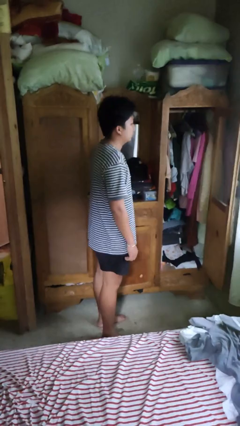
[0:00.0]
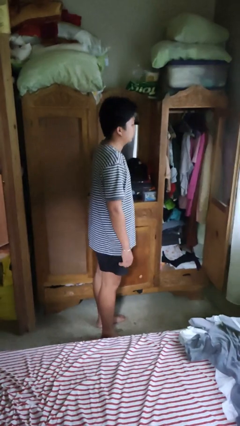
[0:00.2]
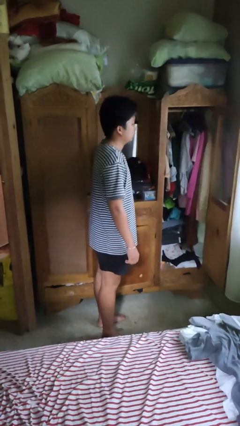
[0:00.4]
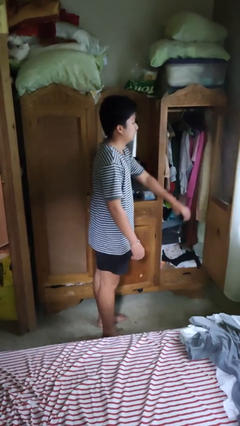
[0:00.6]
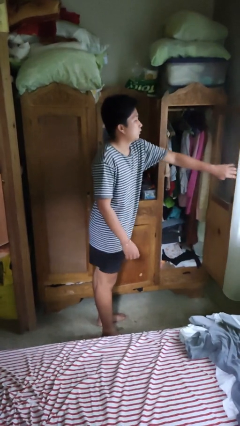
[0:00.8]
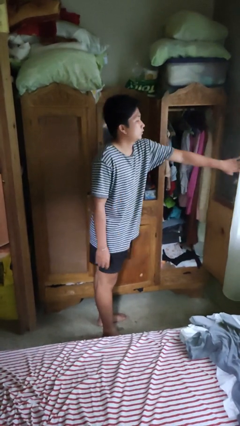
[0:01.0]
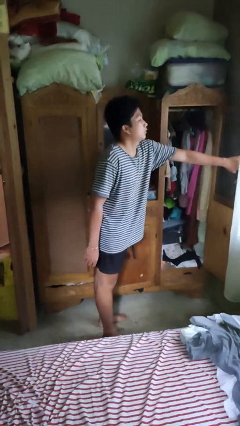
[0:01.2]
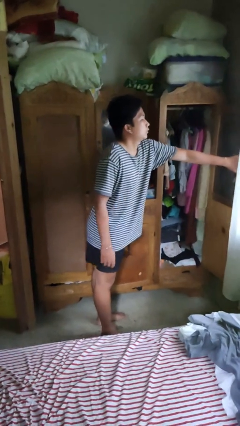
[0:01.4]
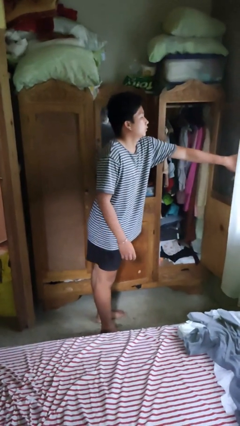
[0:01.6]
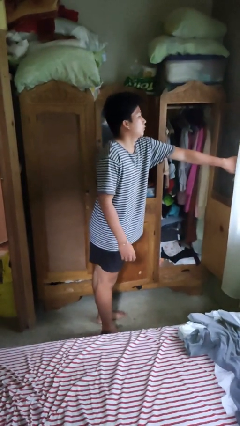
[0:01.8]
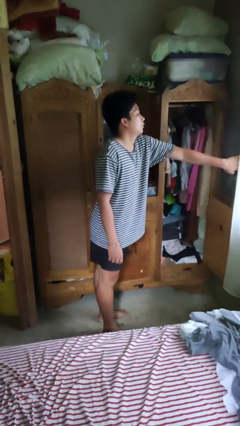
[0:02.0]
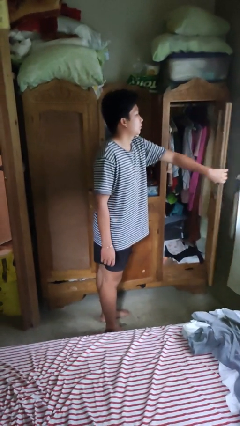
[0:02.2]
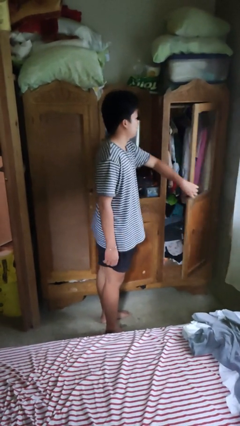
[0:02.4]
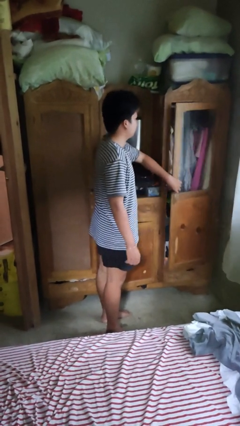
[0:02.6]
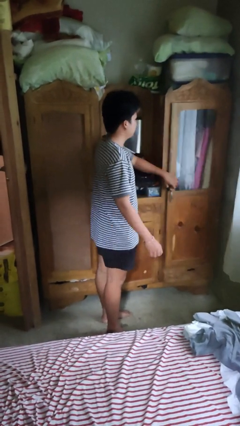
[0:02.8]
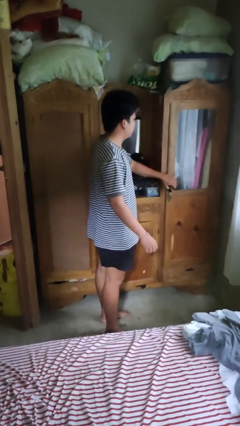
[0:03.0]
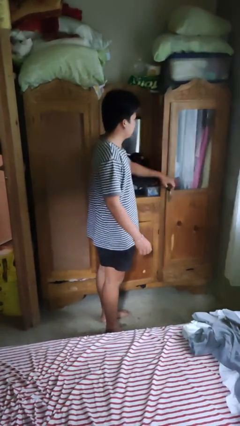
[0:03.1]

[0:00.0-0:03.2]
person closes closet door

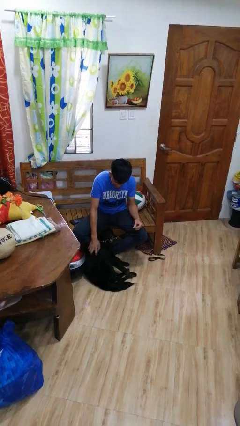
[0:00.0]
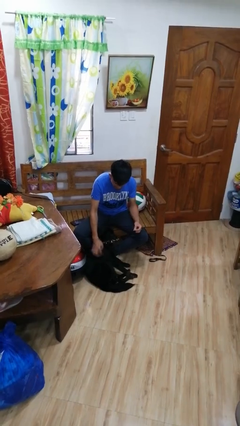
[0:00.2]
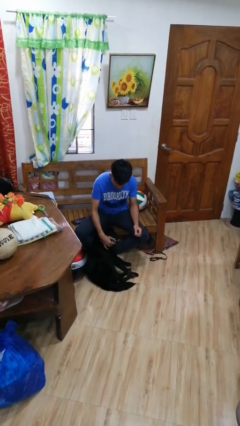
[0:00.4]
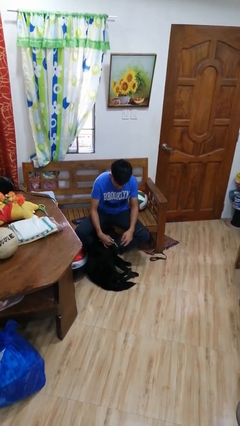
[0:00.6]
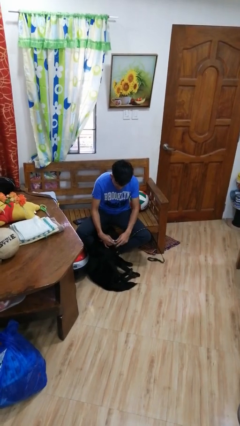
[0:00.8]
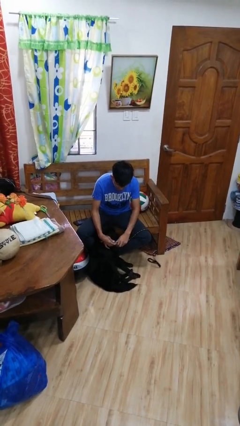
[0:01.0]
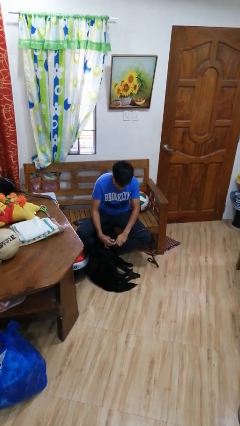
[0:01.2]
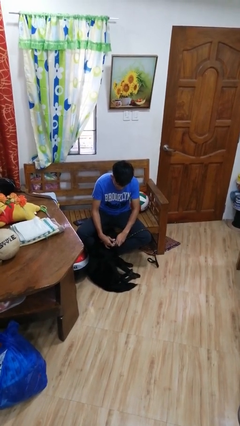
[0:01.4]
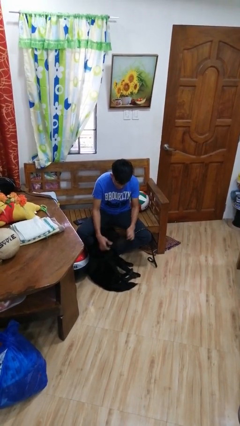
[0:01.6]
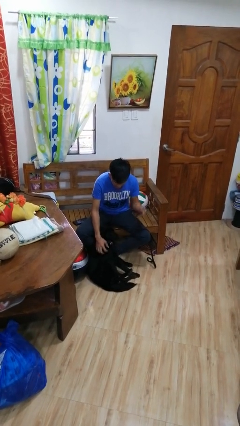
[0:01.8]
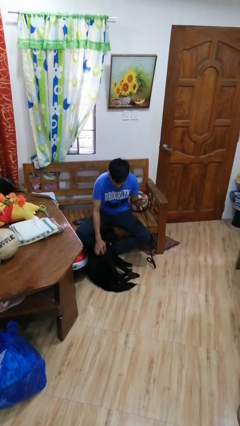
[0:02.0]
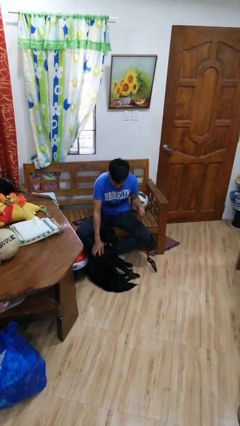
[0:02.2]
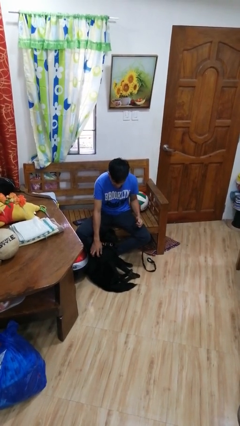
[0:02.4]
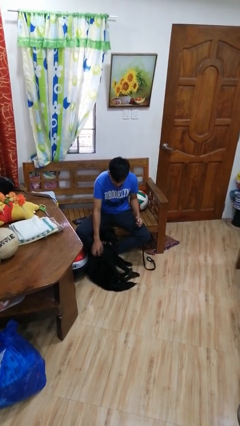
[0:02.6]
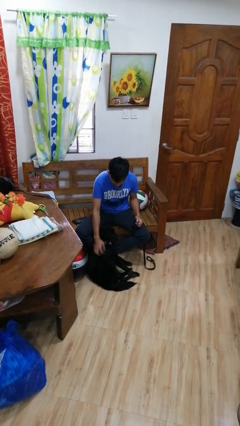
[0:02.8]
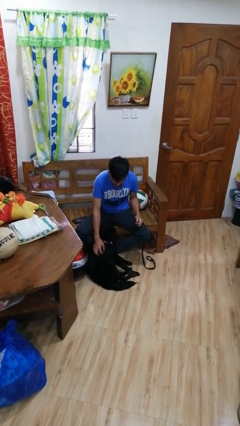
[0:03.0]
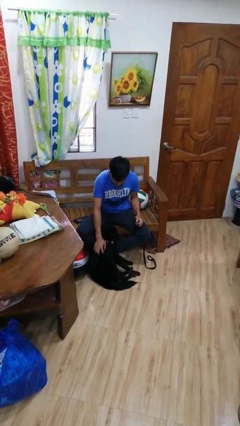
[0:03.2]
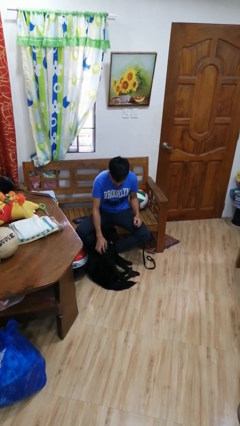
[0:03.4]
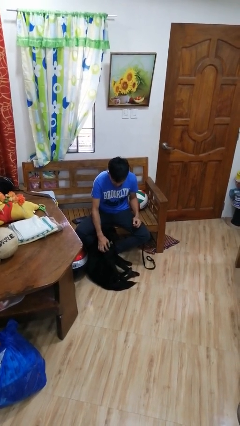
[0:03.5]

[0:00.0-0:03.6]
person unattaches leash from dog

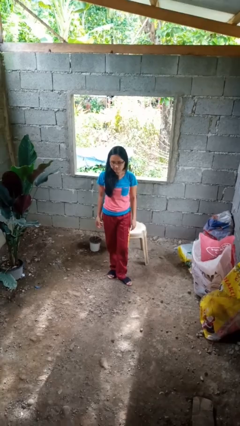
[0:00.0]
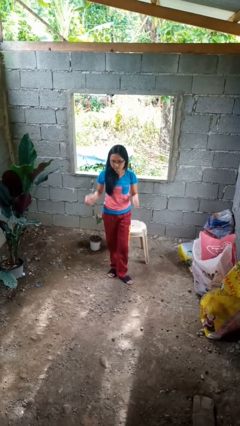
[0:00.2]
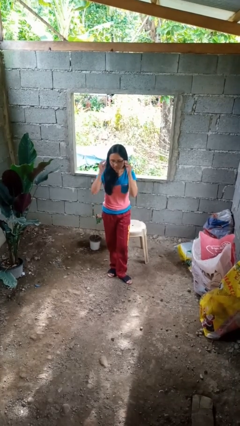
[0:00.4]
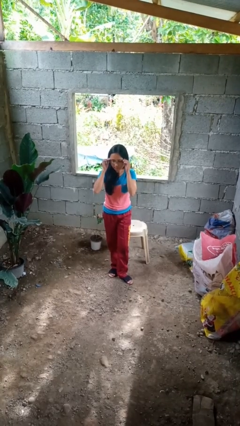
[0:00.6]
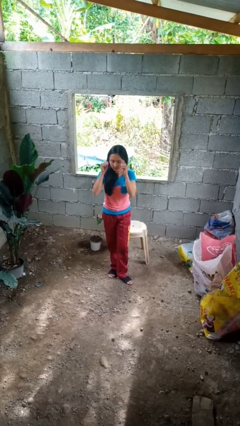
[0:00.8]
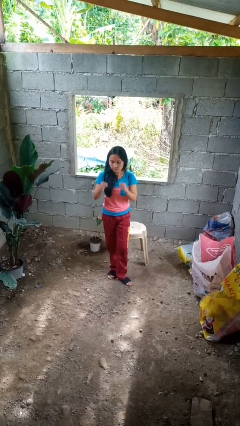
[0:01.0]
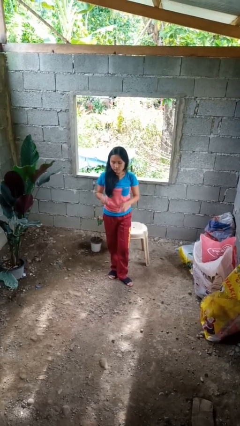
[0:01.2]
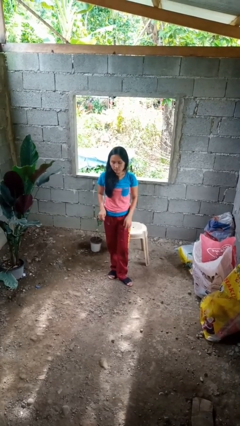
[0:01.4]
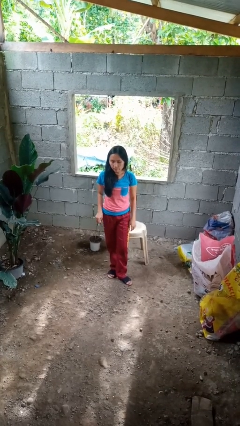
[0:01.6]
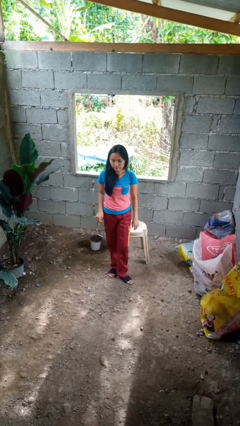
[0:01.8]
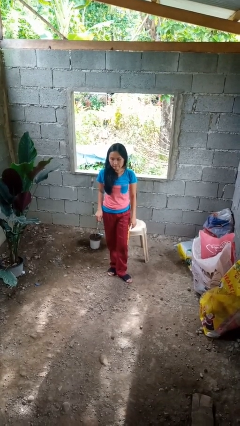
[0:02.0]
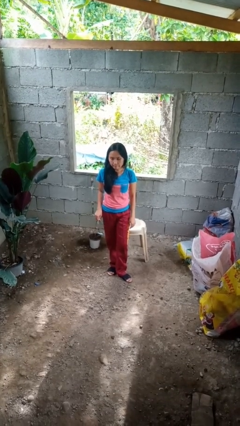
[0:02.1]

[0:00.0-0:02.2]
person takes off glasses

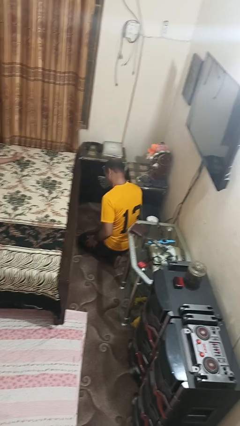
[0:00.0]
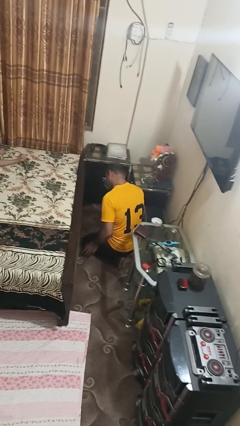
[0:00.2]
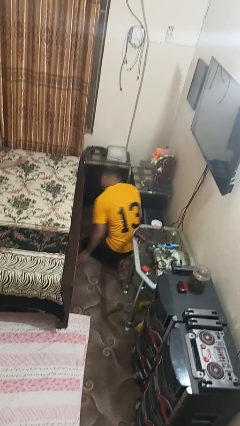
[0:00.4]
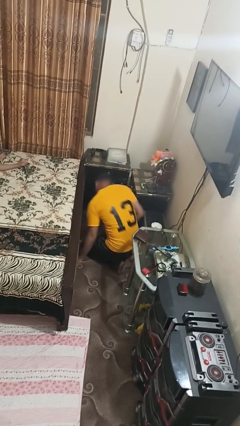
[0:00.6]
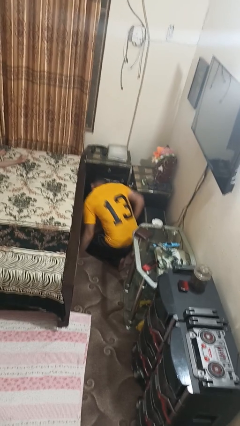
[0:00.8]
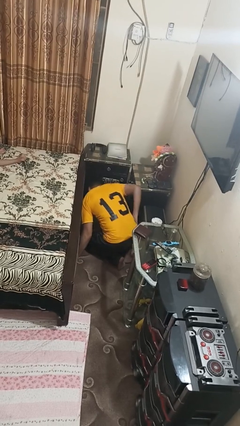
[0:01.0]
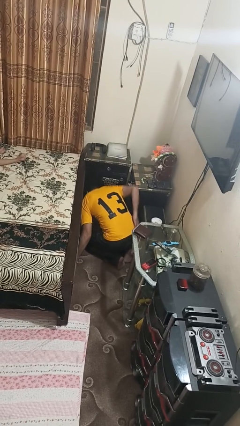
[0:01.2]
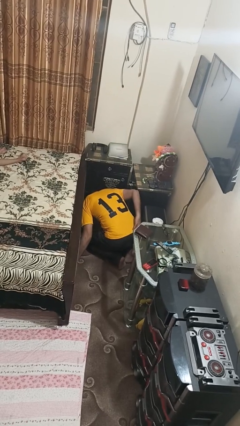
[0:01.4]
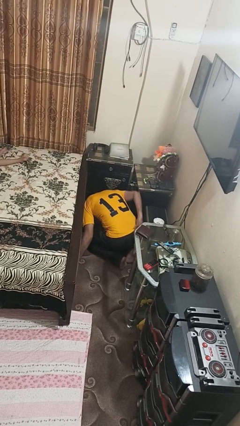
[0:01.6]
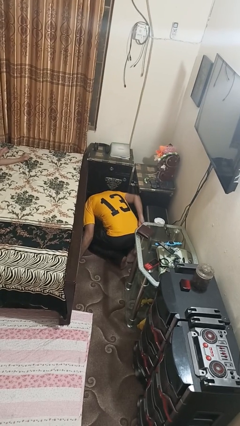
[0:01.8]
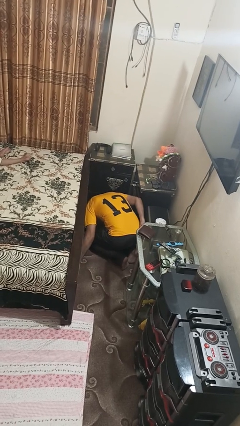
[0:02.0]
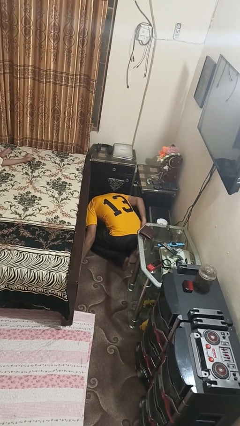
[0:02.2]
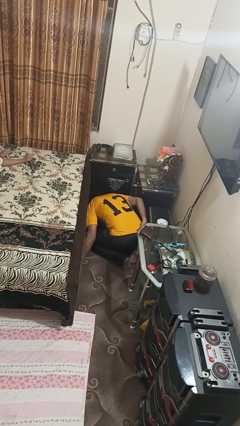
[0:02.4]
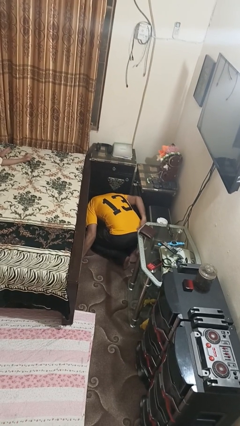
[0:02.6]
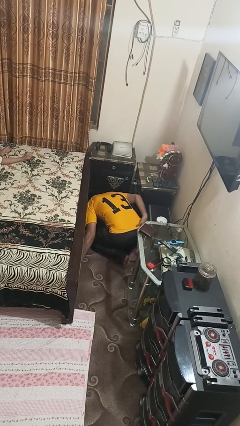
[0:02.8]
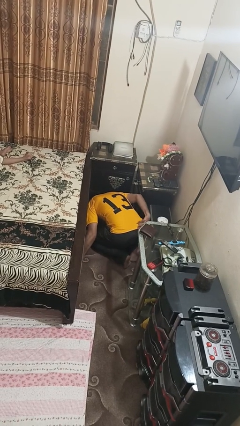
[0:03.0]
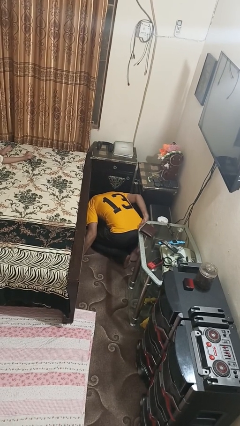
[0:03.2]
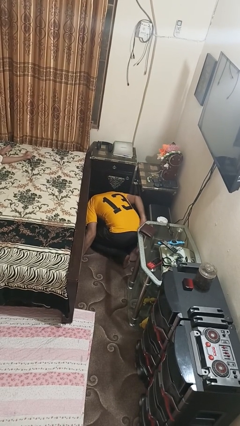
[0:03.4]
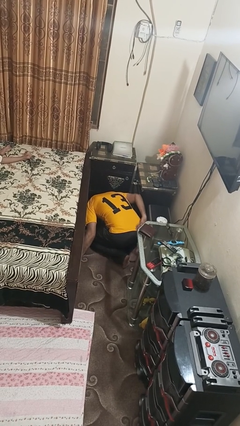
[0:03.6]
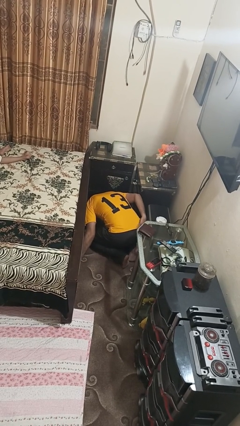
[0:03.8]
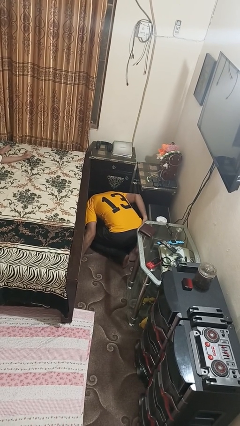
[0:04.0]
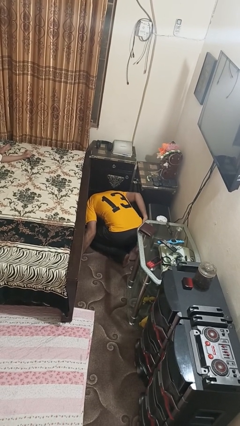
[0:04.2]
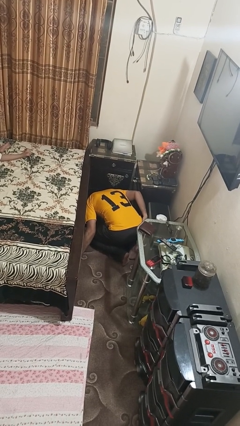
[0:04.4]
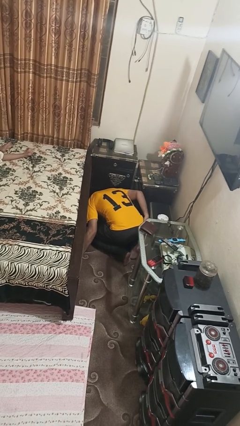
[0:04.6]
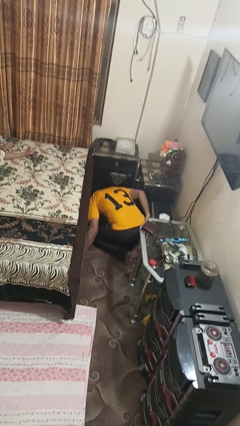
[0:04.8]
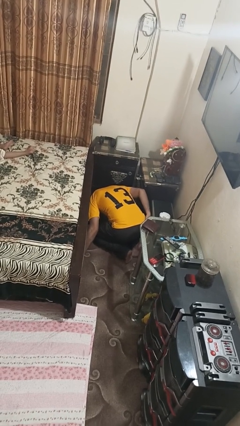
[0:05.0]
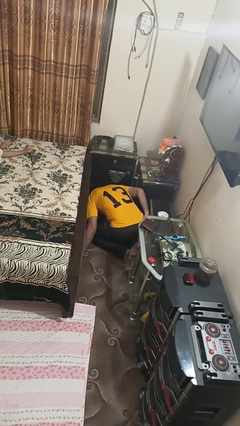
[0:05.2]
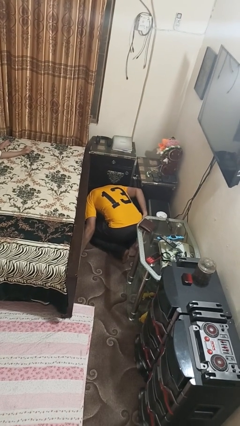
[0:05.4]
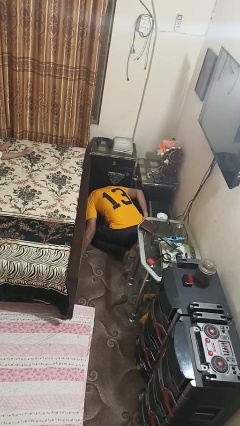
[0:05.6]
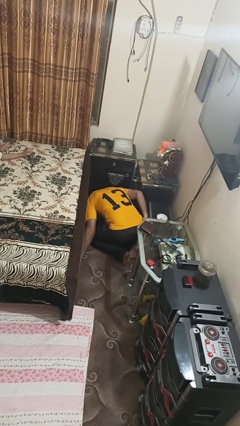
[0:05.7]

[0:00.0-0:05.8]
person searches under bed

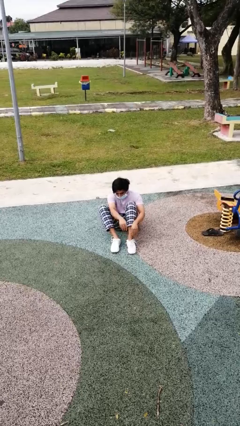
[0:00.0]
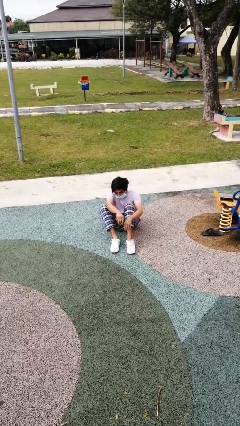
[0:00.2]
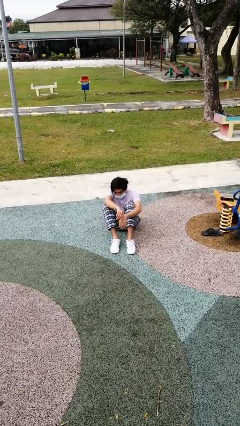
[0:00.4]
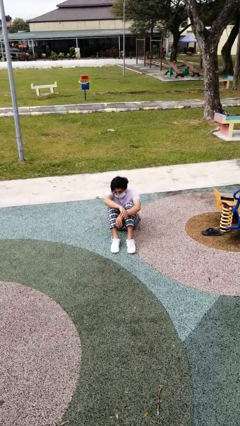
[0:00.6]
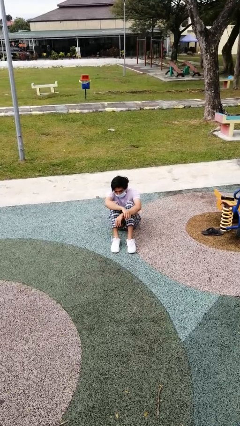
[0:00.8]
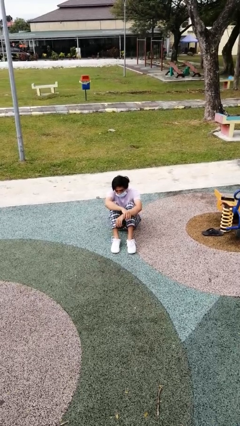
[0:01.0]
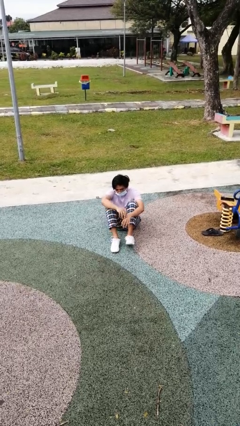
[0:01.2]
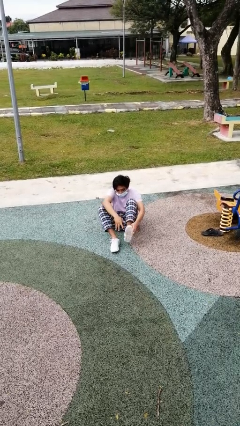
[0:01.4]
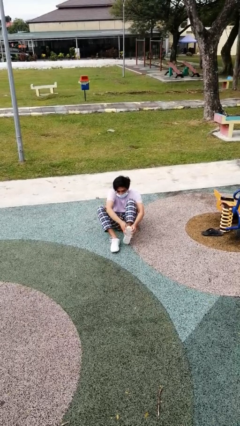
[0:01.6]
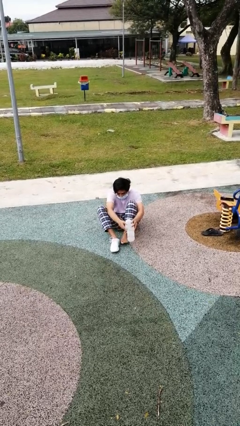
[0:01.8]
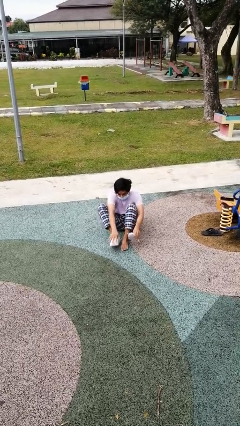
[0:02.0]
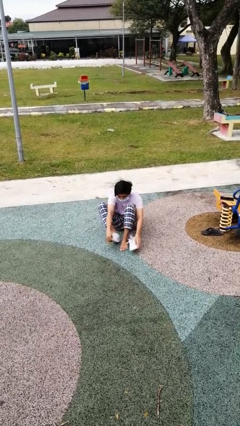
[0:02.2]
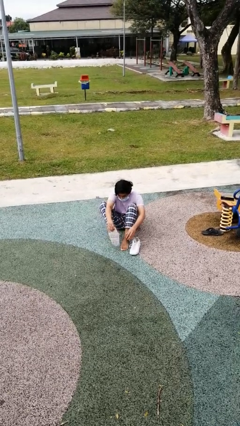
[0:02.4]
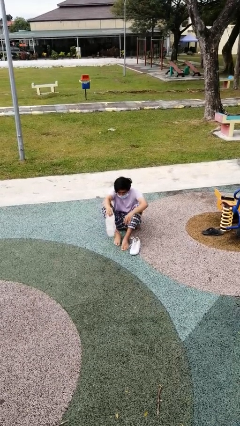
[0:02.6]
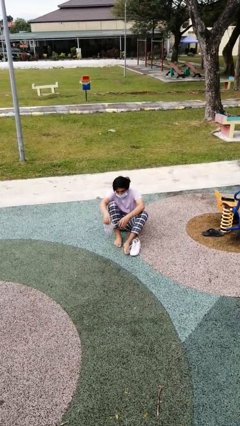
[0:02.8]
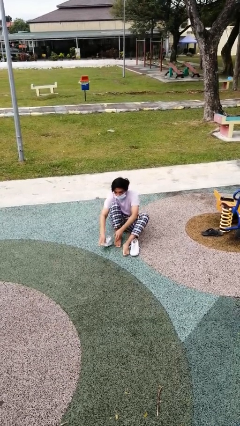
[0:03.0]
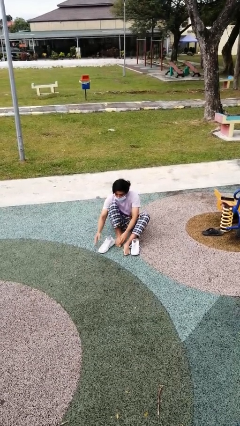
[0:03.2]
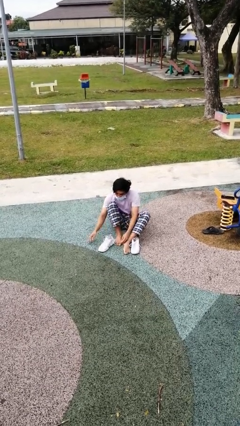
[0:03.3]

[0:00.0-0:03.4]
person takes off shoes
